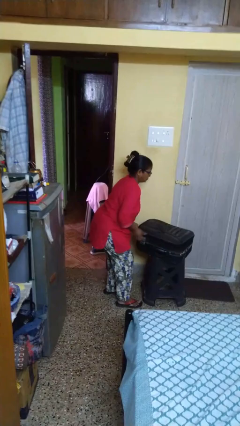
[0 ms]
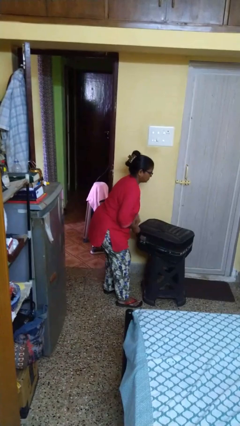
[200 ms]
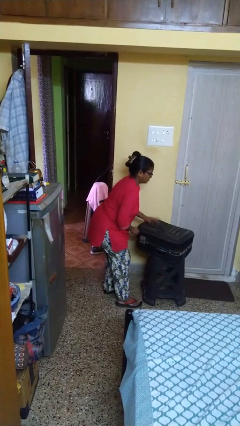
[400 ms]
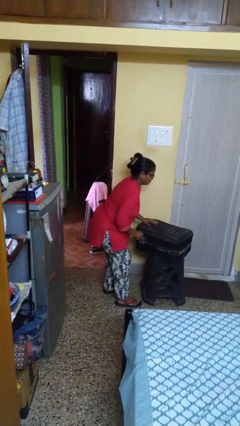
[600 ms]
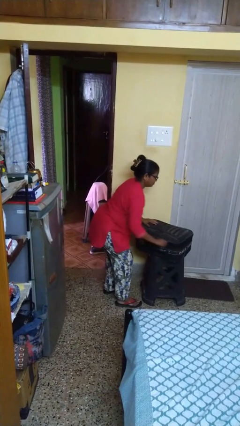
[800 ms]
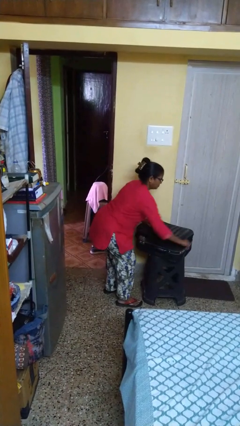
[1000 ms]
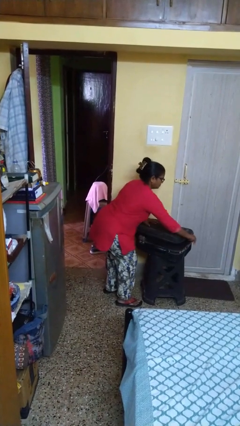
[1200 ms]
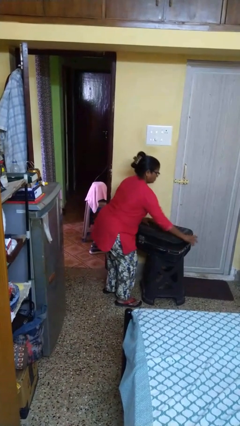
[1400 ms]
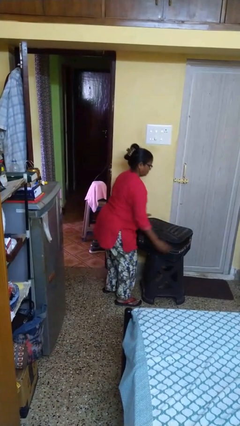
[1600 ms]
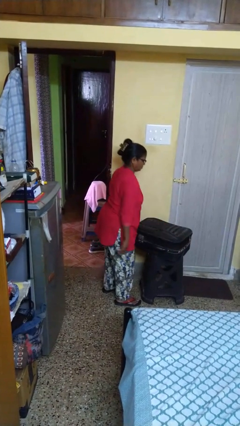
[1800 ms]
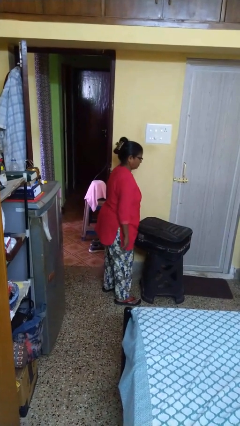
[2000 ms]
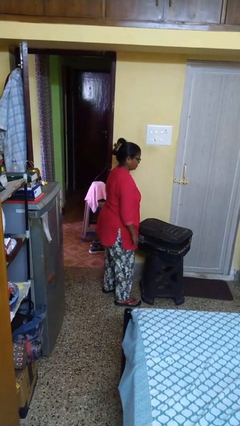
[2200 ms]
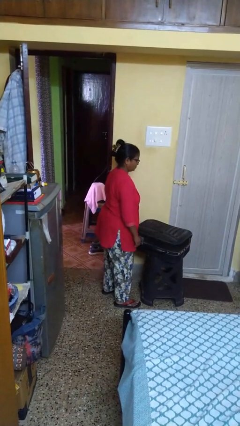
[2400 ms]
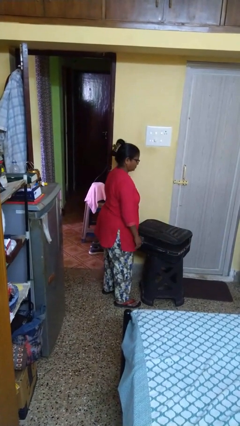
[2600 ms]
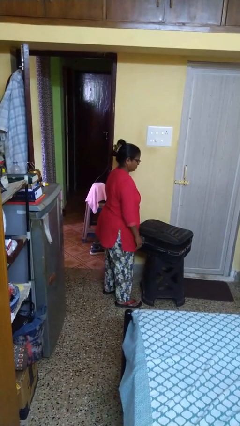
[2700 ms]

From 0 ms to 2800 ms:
person closes suitcase

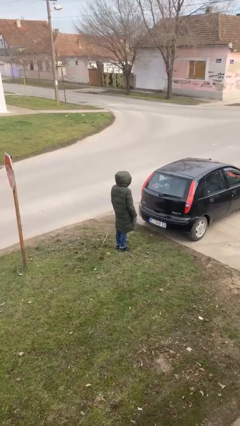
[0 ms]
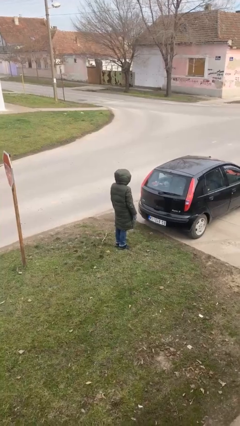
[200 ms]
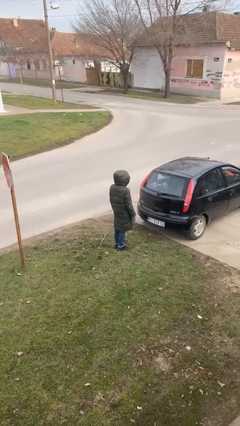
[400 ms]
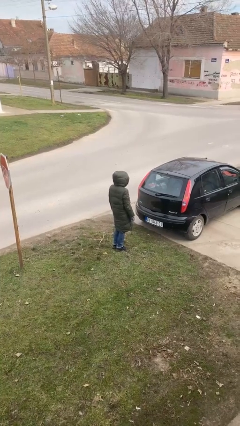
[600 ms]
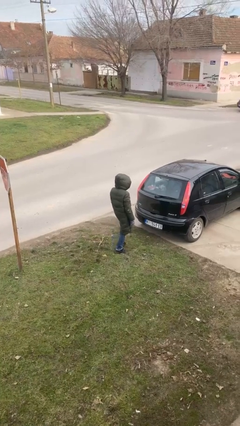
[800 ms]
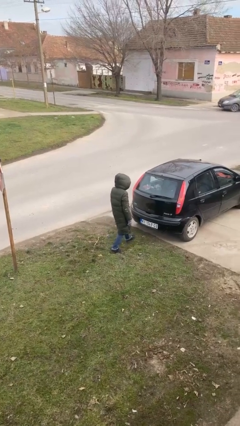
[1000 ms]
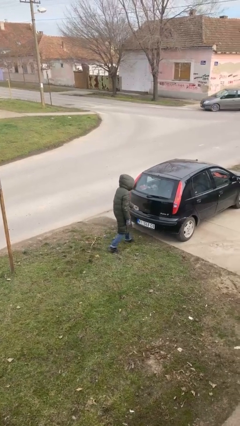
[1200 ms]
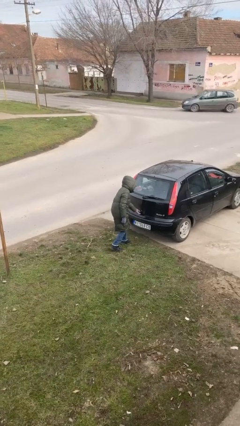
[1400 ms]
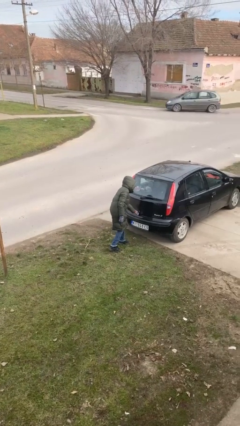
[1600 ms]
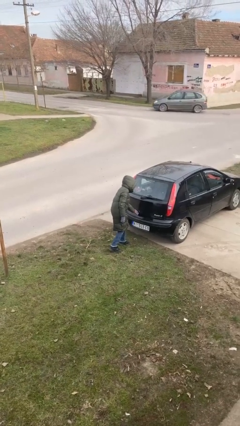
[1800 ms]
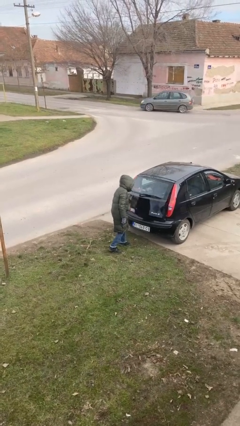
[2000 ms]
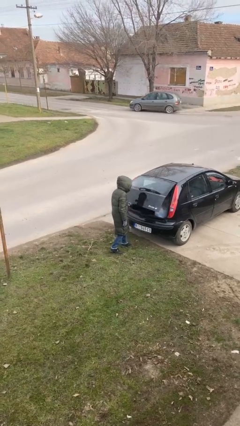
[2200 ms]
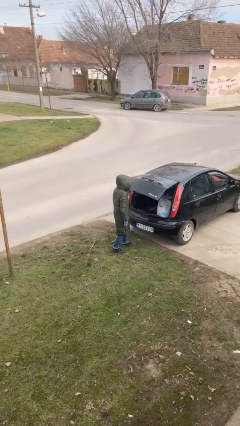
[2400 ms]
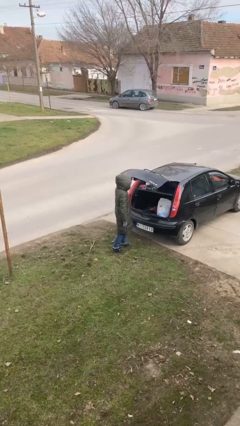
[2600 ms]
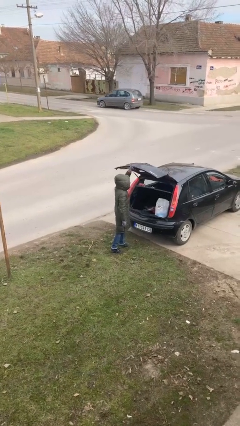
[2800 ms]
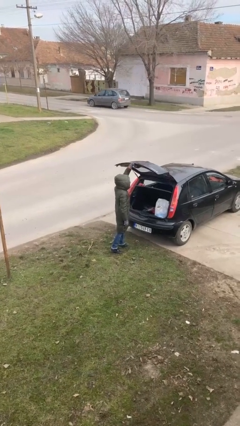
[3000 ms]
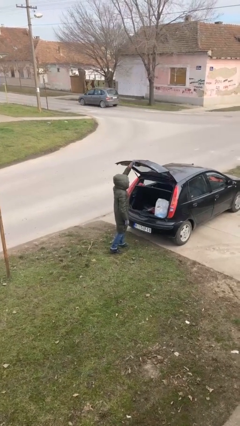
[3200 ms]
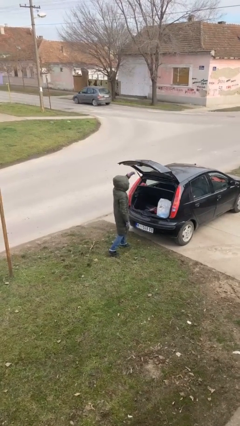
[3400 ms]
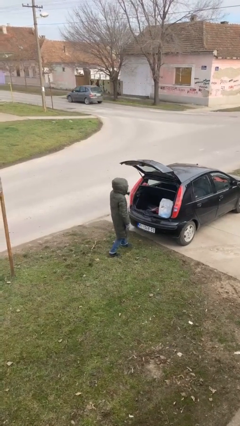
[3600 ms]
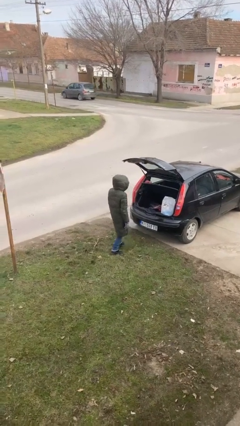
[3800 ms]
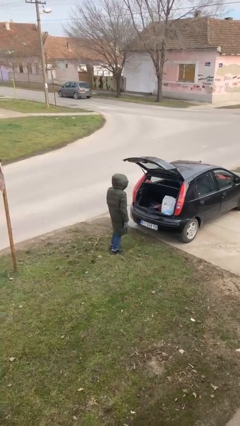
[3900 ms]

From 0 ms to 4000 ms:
person opens car trunk

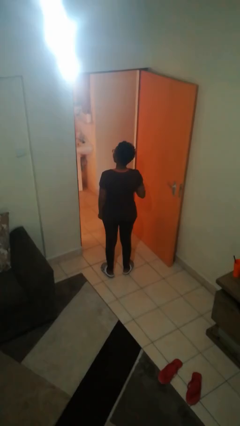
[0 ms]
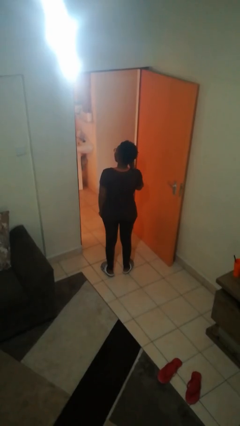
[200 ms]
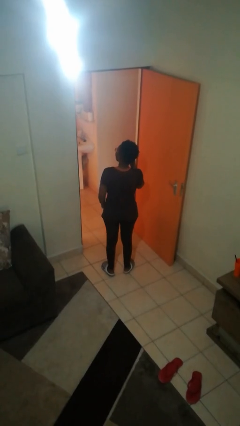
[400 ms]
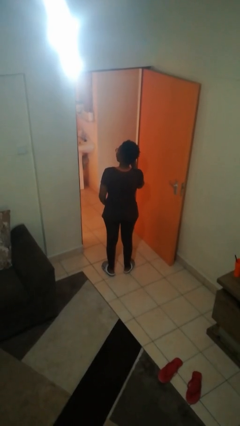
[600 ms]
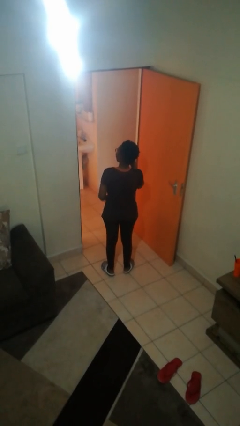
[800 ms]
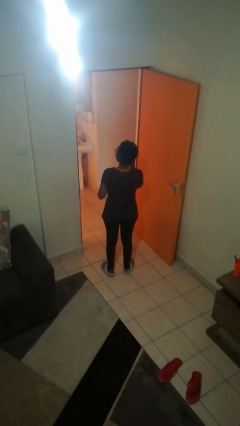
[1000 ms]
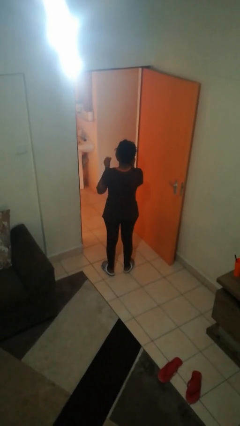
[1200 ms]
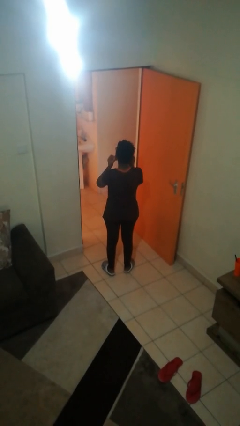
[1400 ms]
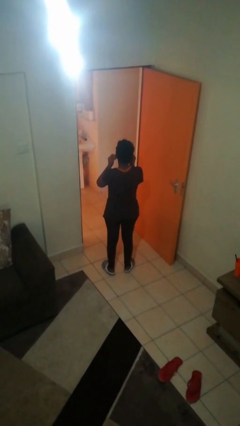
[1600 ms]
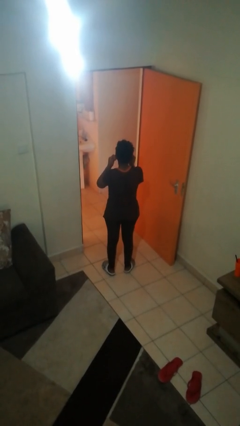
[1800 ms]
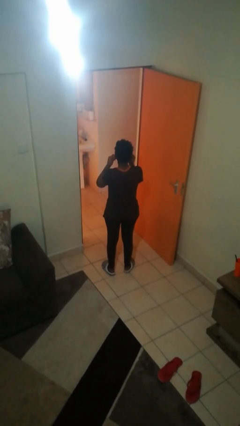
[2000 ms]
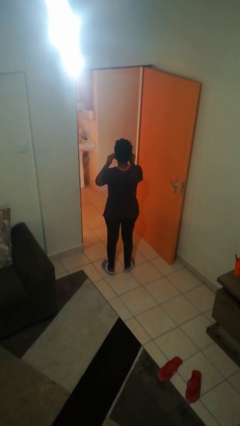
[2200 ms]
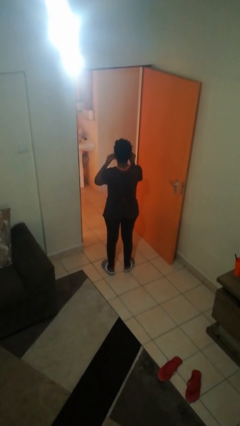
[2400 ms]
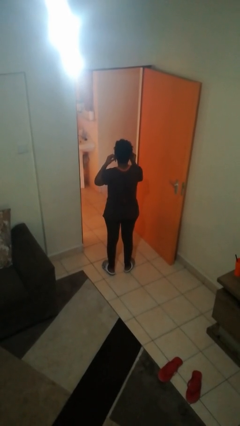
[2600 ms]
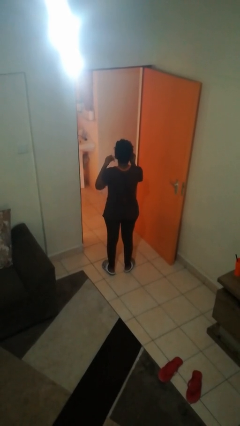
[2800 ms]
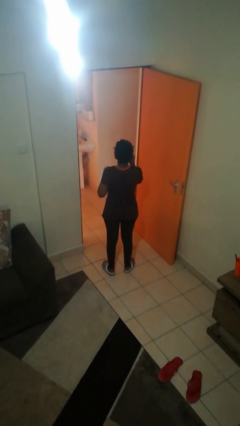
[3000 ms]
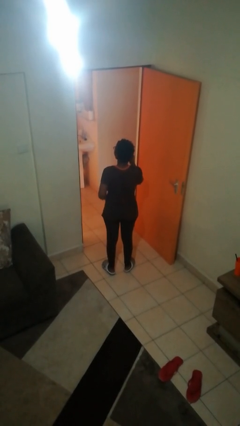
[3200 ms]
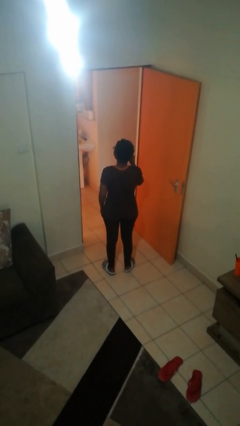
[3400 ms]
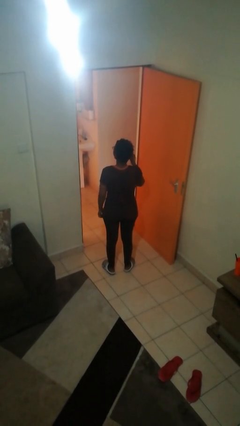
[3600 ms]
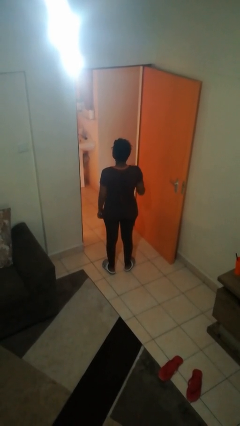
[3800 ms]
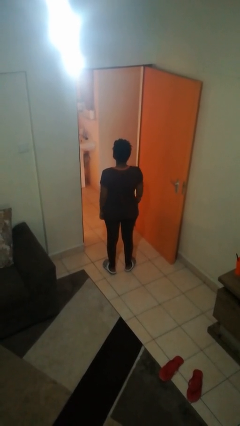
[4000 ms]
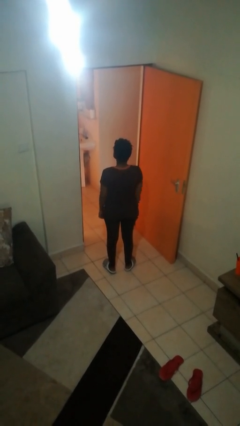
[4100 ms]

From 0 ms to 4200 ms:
person puts on earrings

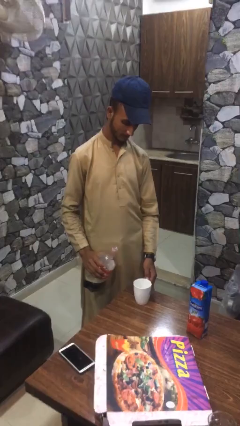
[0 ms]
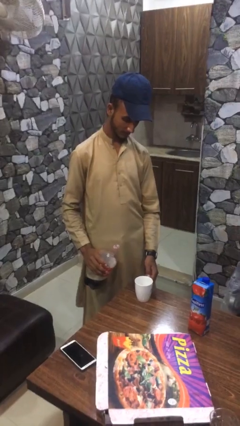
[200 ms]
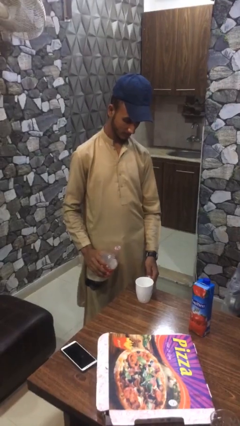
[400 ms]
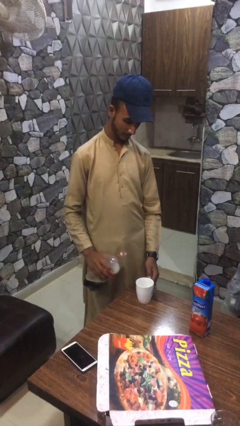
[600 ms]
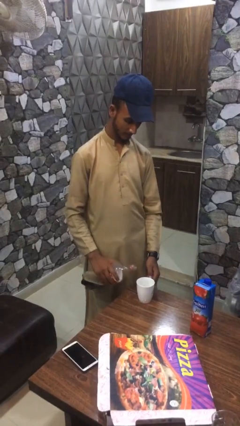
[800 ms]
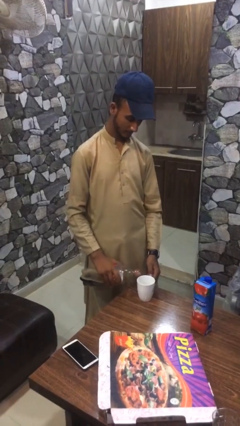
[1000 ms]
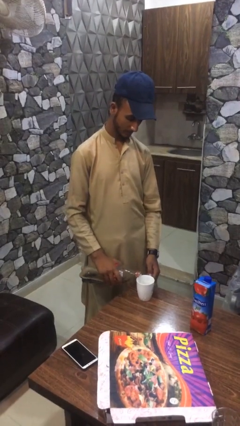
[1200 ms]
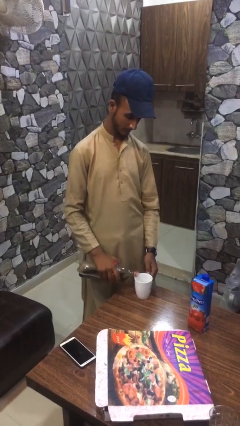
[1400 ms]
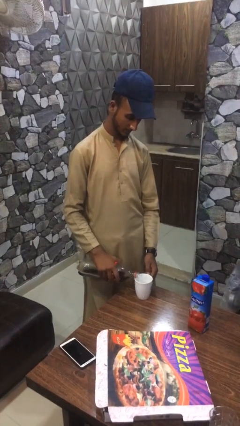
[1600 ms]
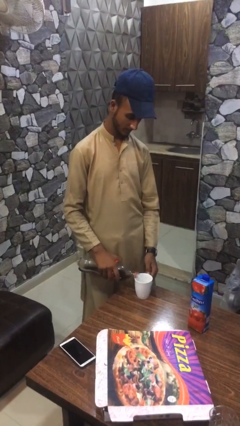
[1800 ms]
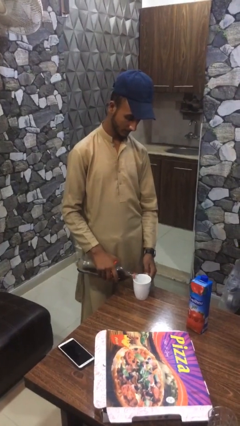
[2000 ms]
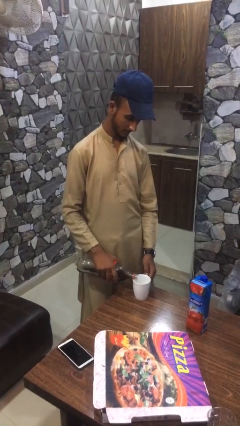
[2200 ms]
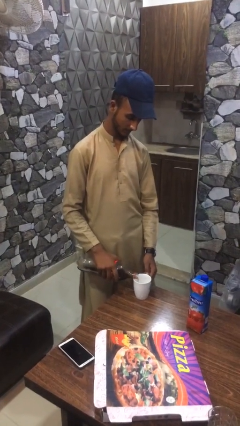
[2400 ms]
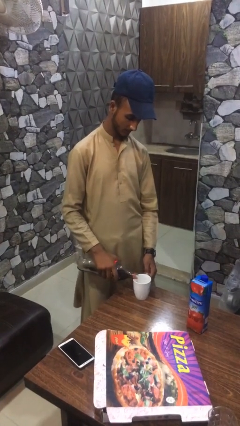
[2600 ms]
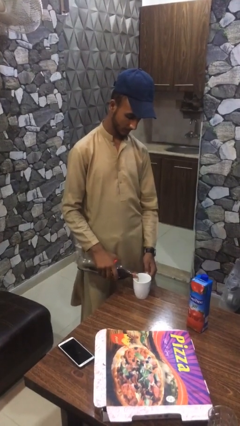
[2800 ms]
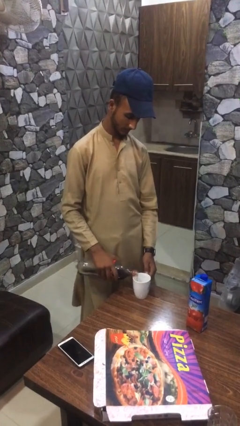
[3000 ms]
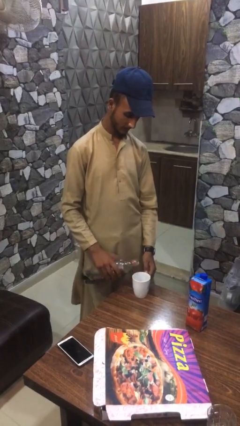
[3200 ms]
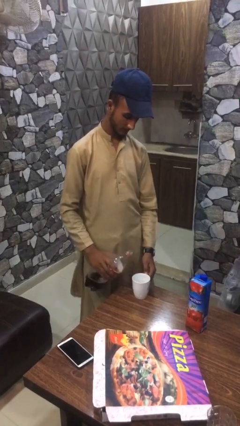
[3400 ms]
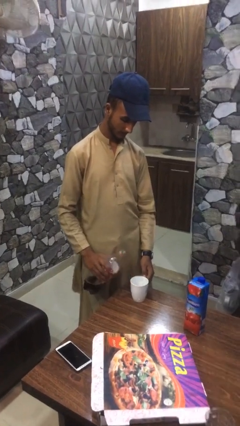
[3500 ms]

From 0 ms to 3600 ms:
person pours coffee into mug

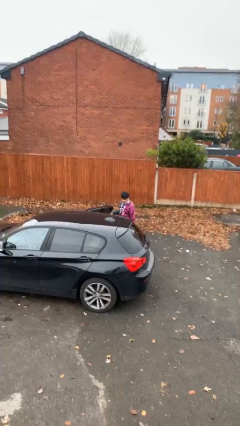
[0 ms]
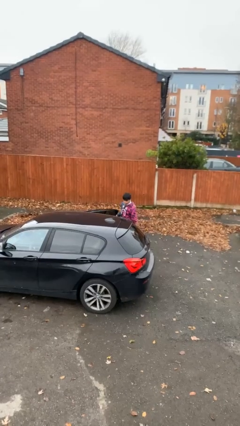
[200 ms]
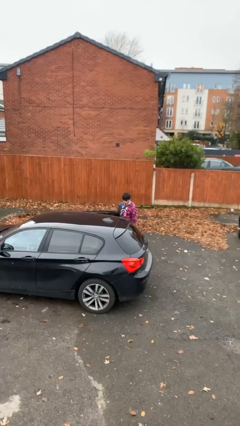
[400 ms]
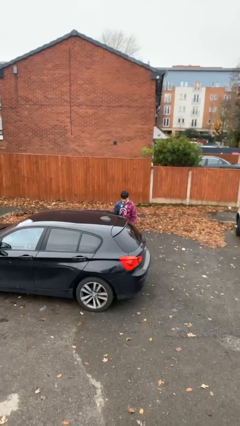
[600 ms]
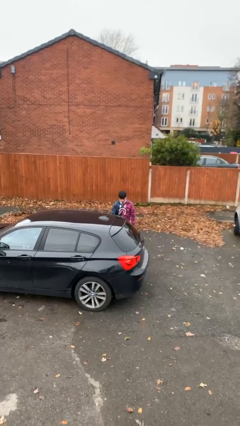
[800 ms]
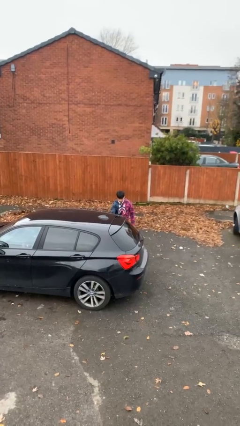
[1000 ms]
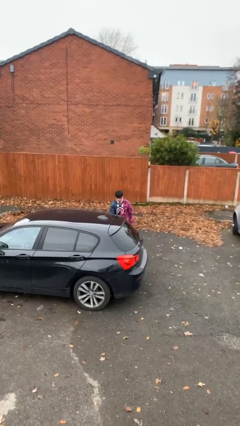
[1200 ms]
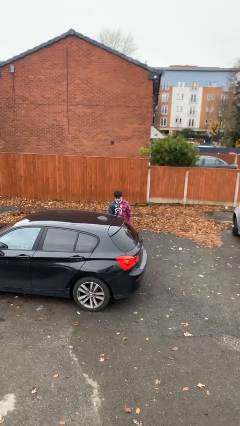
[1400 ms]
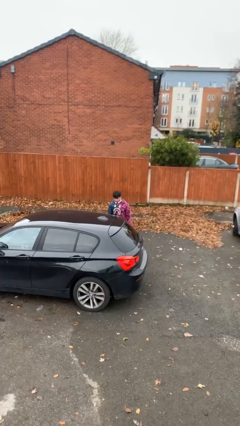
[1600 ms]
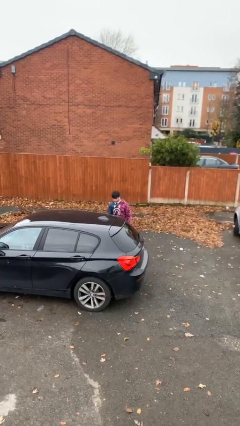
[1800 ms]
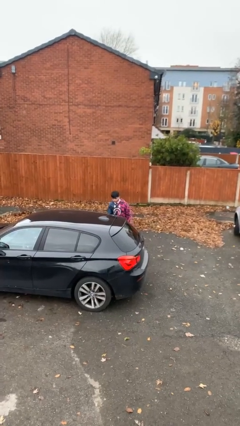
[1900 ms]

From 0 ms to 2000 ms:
person closes car door

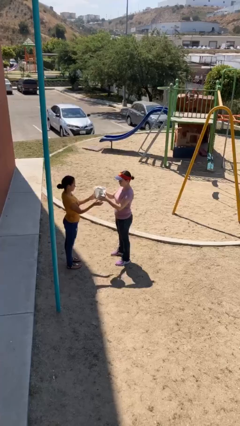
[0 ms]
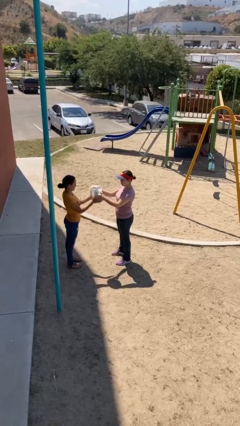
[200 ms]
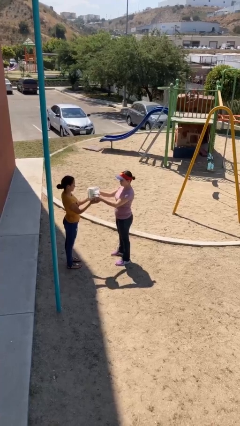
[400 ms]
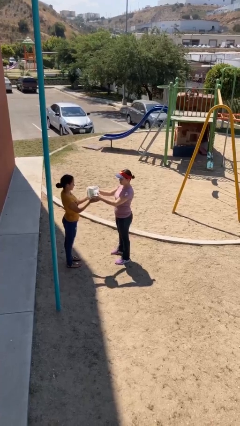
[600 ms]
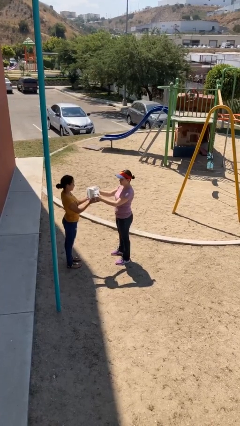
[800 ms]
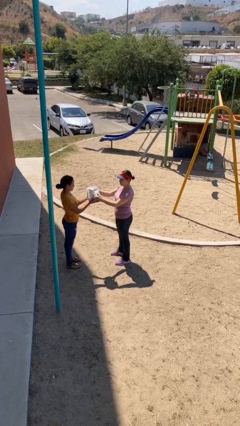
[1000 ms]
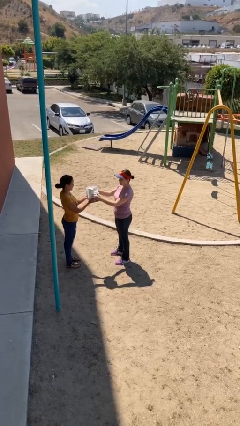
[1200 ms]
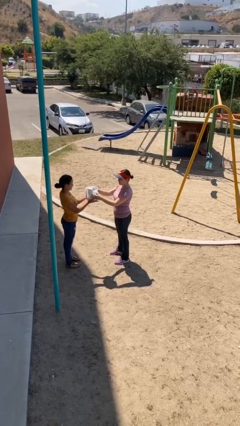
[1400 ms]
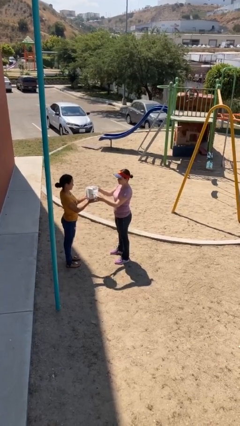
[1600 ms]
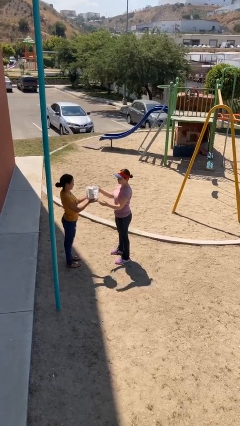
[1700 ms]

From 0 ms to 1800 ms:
person transfers object to person
